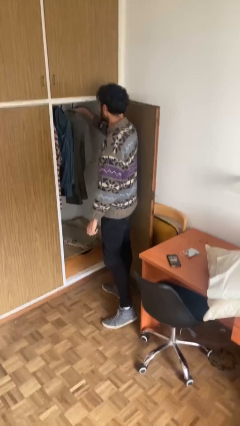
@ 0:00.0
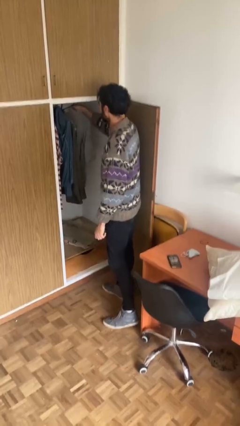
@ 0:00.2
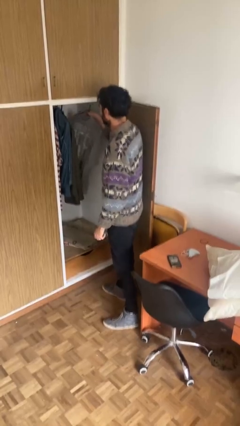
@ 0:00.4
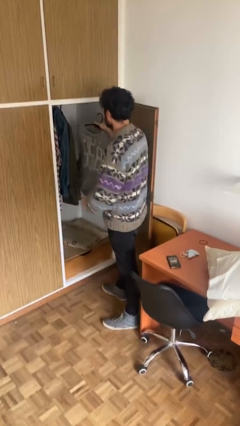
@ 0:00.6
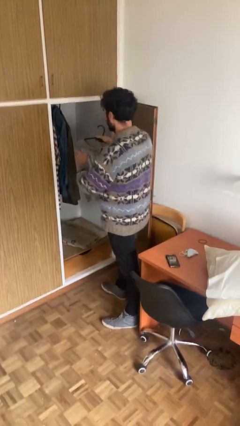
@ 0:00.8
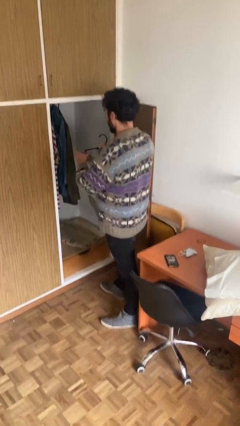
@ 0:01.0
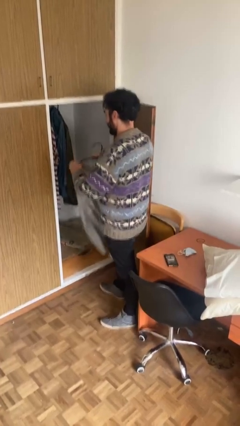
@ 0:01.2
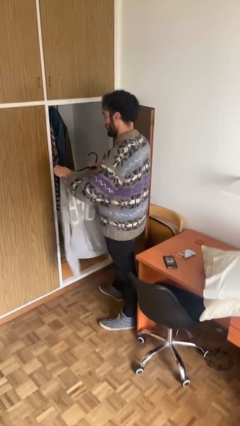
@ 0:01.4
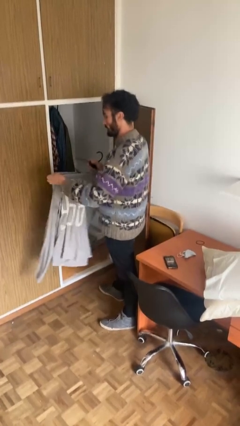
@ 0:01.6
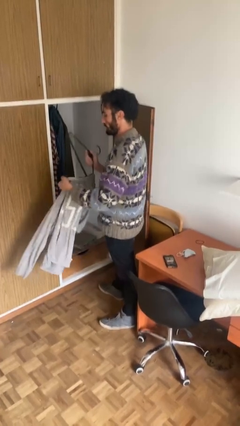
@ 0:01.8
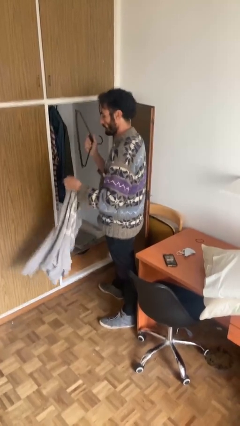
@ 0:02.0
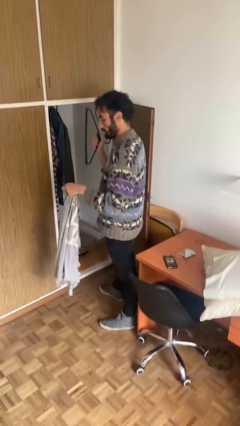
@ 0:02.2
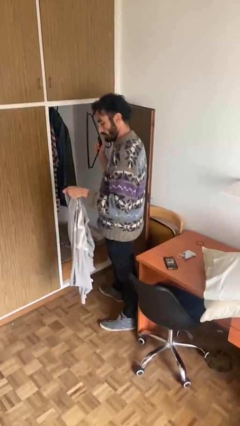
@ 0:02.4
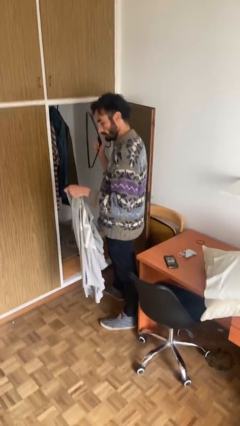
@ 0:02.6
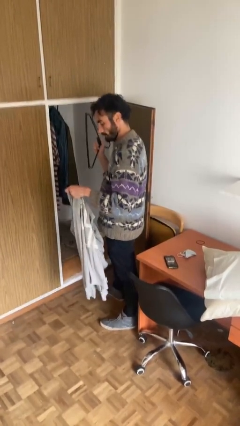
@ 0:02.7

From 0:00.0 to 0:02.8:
person takes clothes from closet

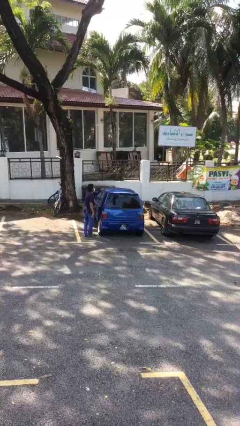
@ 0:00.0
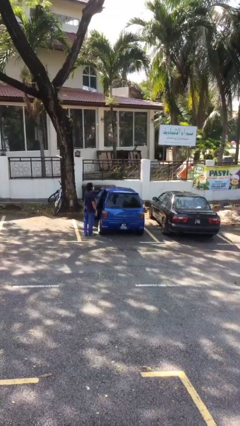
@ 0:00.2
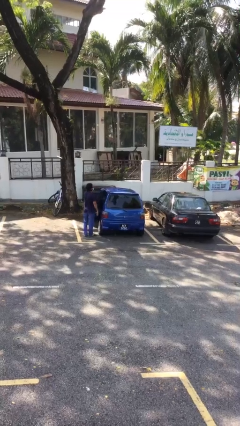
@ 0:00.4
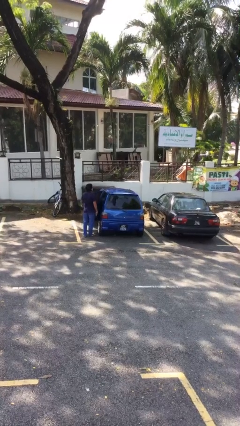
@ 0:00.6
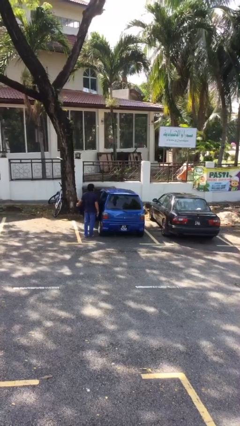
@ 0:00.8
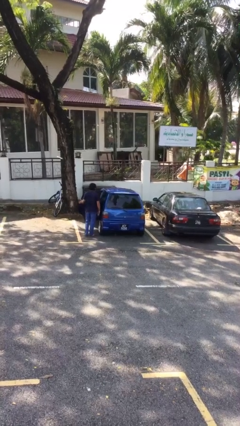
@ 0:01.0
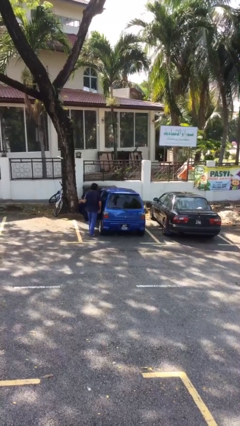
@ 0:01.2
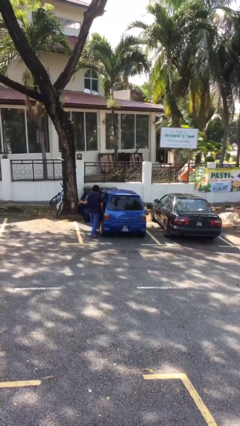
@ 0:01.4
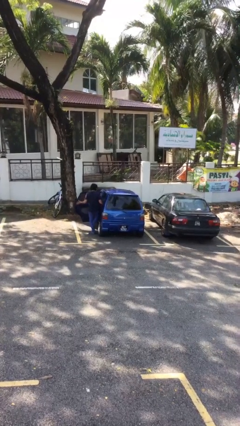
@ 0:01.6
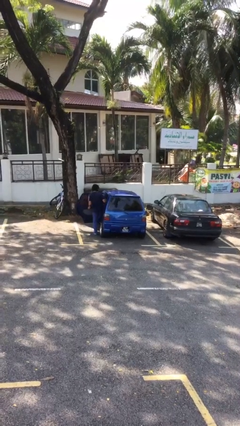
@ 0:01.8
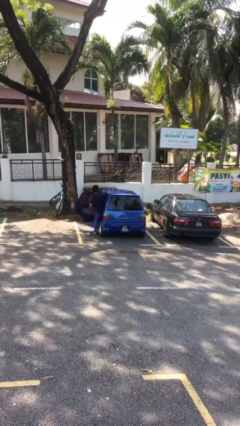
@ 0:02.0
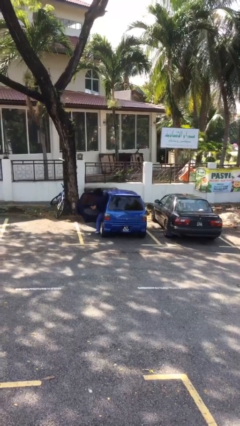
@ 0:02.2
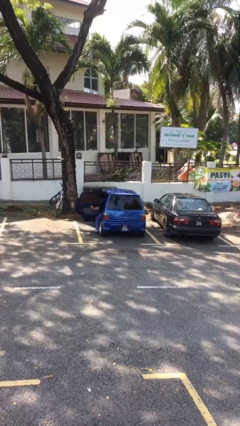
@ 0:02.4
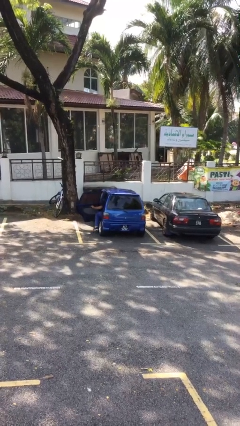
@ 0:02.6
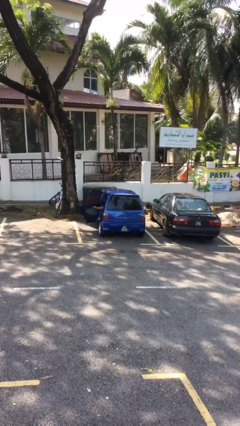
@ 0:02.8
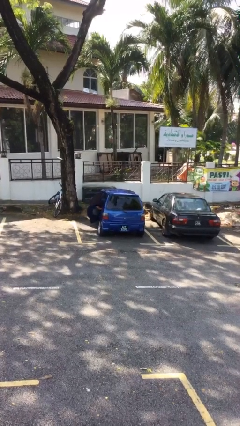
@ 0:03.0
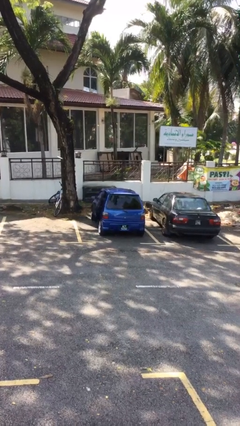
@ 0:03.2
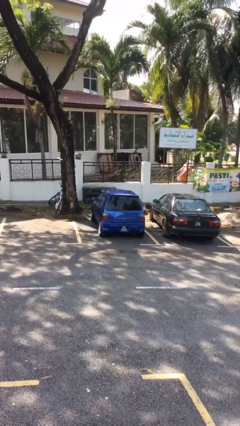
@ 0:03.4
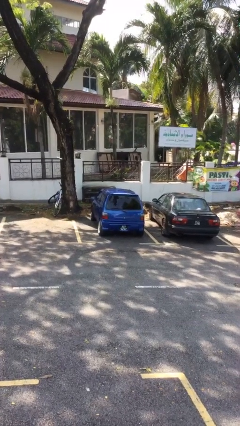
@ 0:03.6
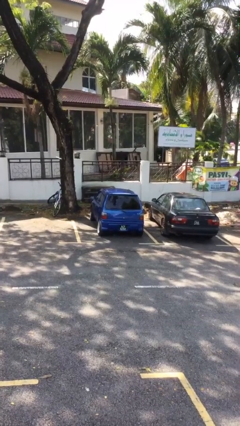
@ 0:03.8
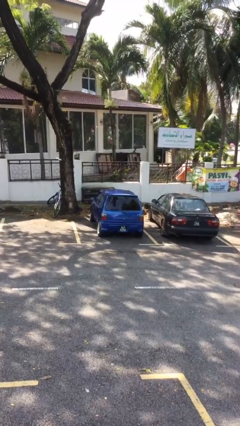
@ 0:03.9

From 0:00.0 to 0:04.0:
car picks up person

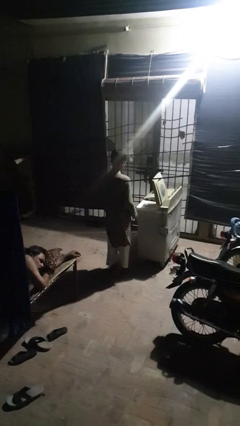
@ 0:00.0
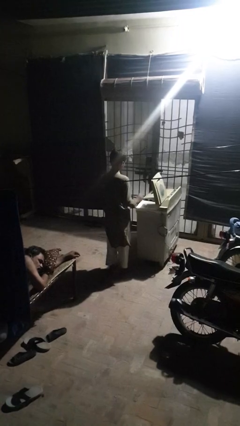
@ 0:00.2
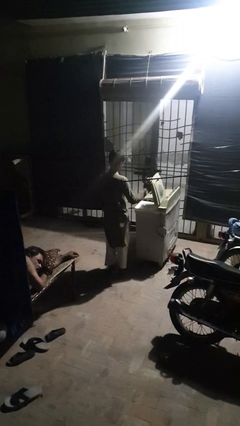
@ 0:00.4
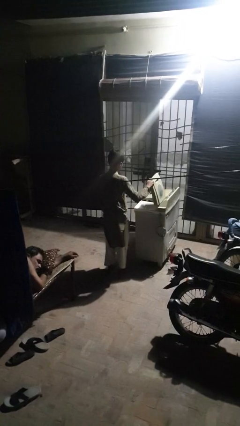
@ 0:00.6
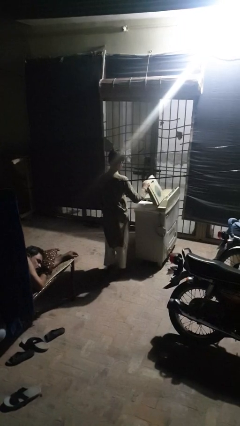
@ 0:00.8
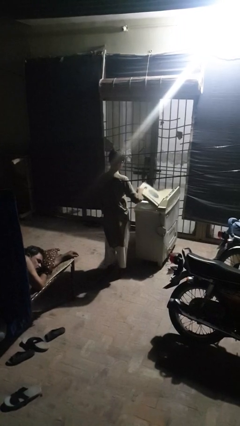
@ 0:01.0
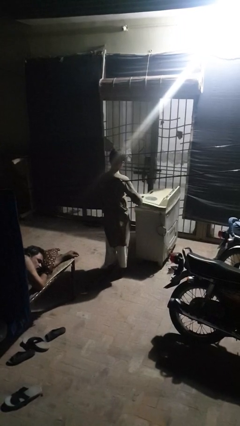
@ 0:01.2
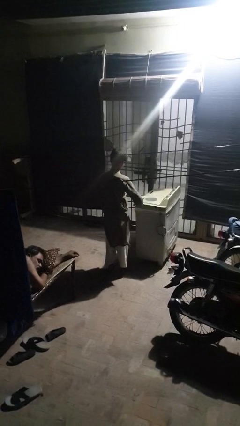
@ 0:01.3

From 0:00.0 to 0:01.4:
person closes clothes washer

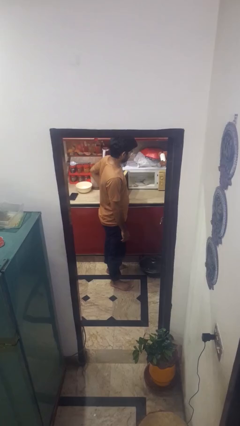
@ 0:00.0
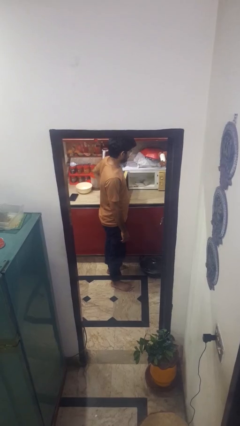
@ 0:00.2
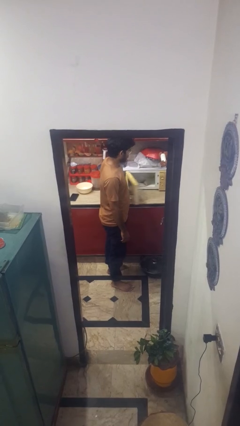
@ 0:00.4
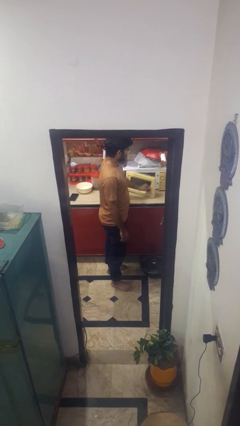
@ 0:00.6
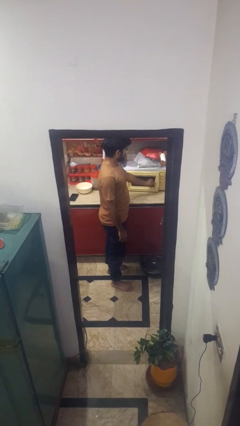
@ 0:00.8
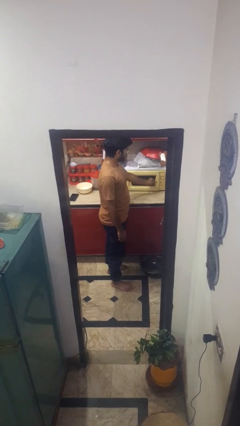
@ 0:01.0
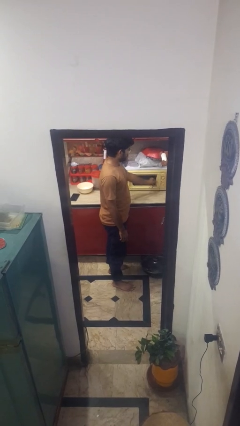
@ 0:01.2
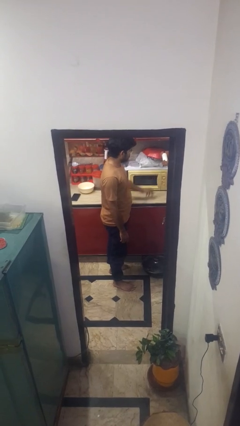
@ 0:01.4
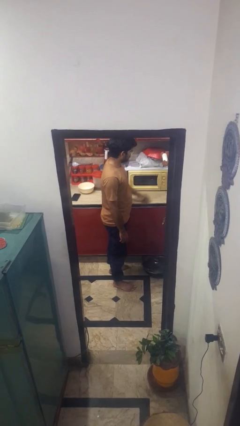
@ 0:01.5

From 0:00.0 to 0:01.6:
person closes microwave

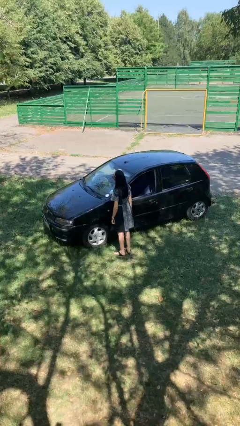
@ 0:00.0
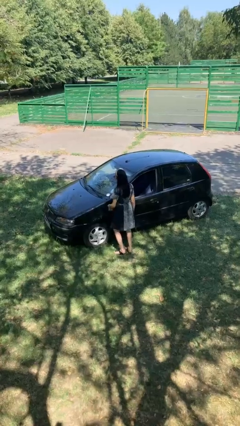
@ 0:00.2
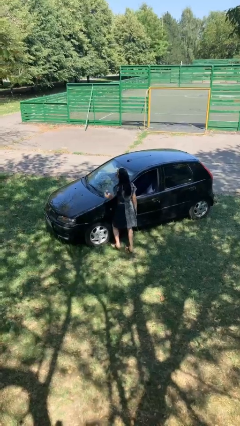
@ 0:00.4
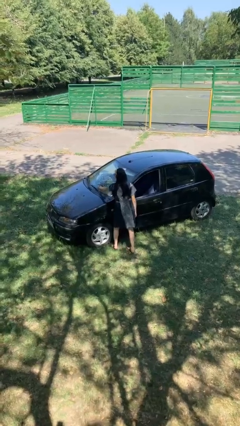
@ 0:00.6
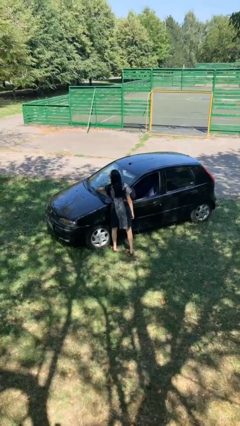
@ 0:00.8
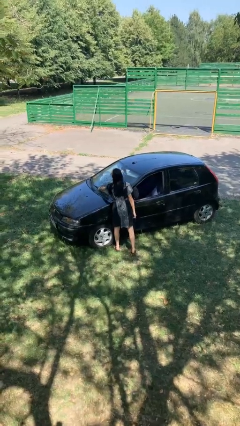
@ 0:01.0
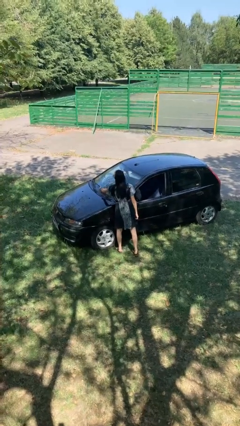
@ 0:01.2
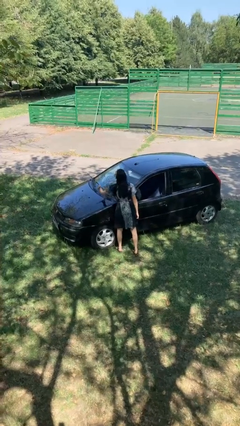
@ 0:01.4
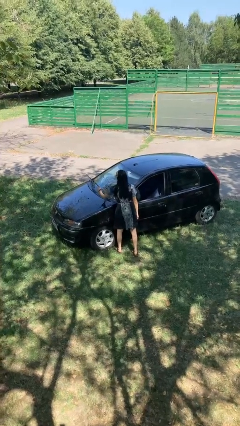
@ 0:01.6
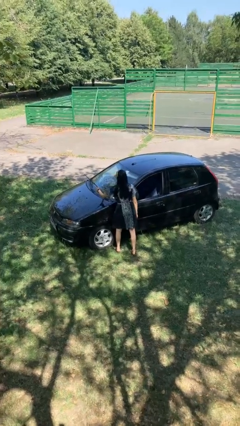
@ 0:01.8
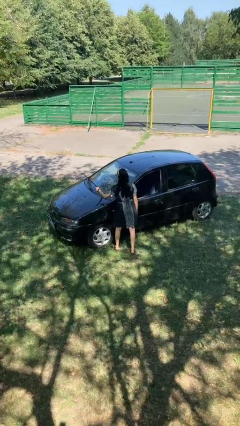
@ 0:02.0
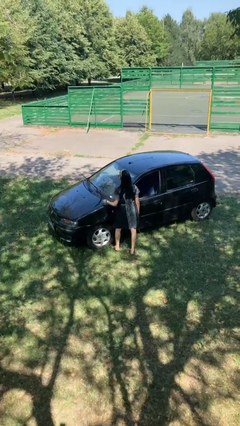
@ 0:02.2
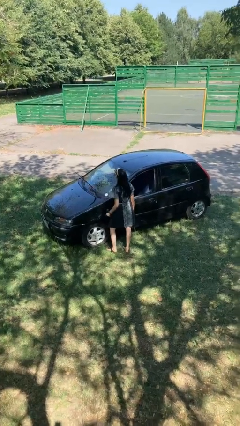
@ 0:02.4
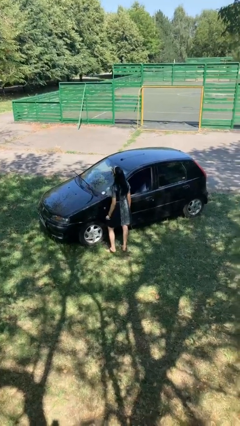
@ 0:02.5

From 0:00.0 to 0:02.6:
person flips up car wipers

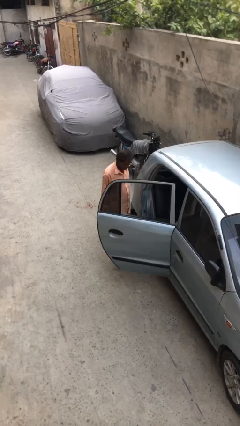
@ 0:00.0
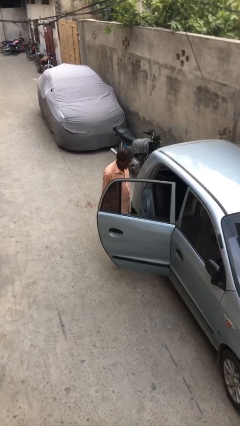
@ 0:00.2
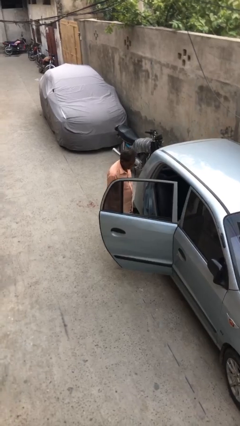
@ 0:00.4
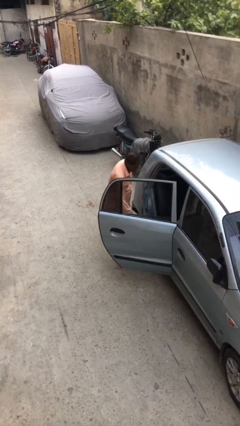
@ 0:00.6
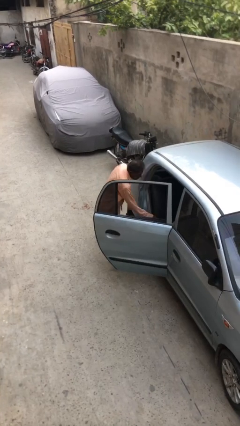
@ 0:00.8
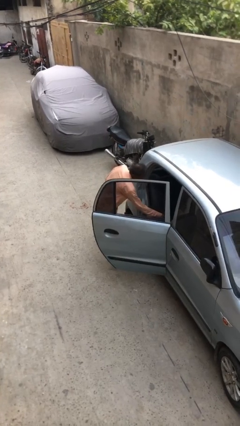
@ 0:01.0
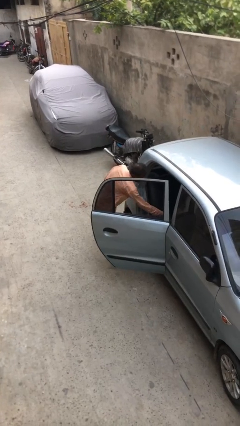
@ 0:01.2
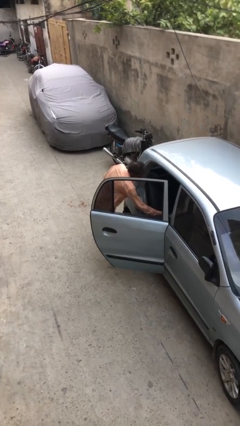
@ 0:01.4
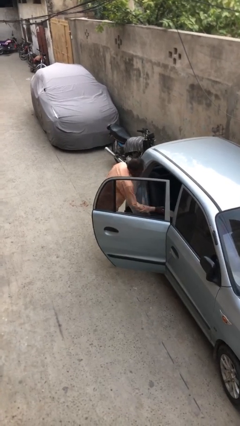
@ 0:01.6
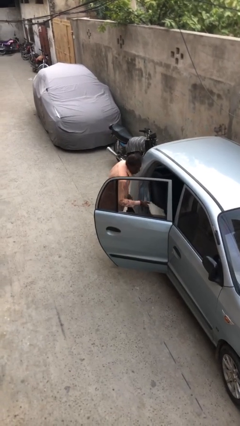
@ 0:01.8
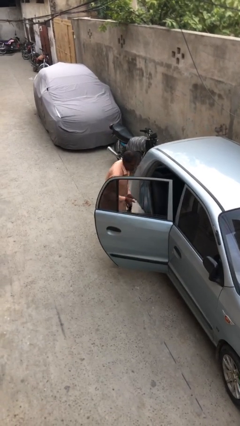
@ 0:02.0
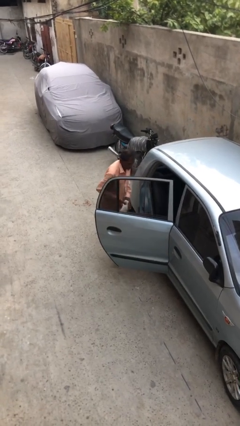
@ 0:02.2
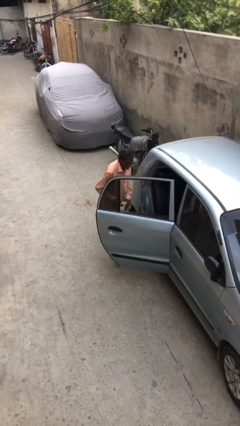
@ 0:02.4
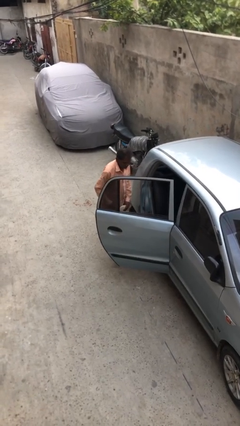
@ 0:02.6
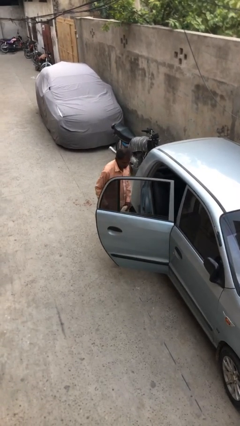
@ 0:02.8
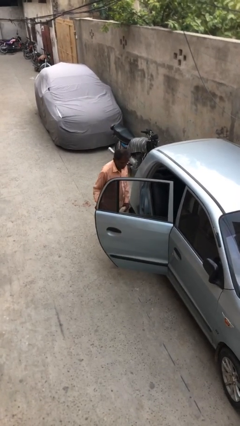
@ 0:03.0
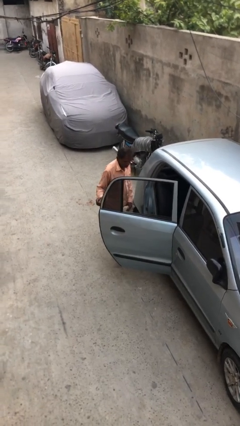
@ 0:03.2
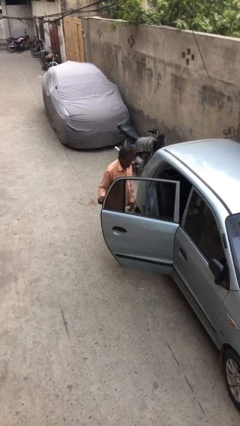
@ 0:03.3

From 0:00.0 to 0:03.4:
person unloads car

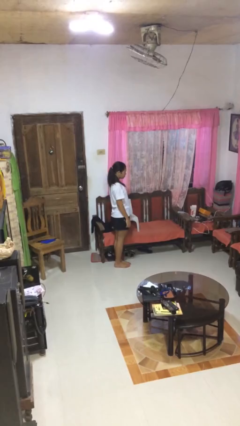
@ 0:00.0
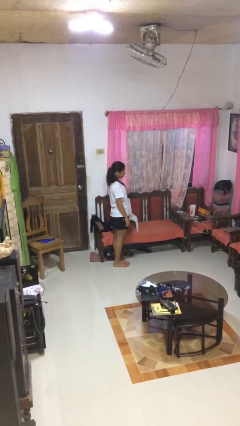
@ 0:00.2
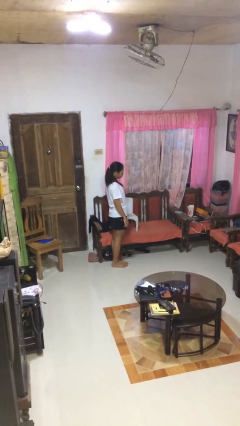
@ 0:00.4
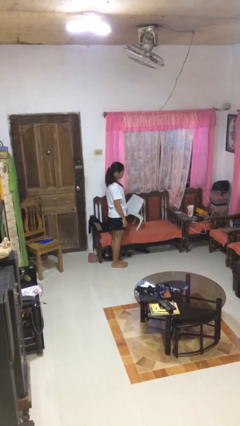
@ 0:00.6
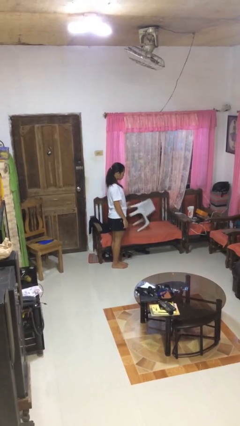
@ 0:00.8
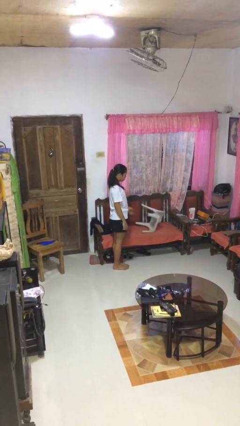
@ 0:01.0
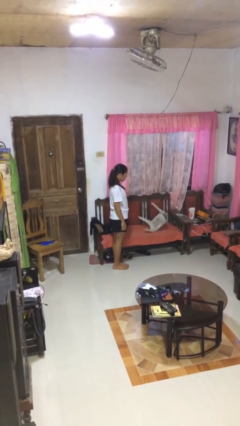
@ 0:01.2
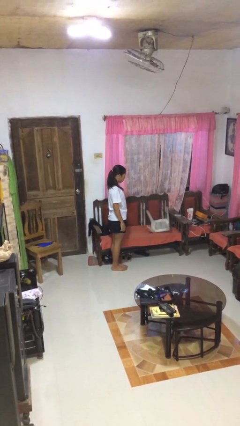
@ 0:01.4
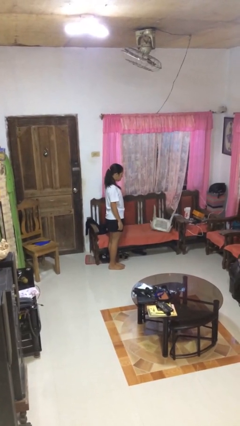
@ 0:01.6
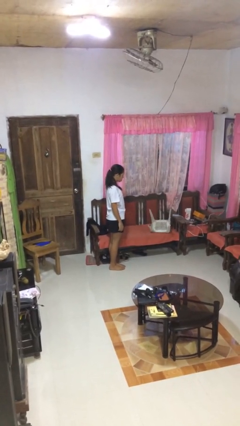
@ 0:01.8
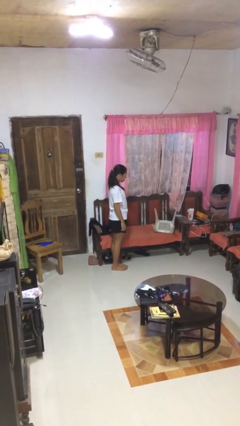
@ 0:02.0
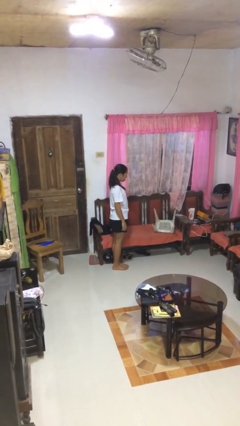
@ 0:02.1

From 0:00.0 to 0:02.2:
person knocks over furniture
